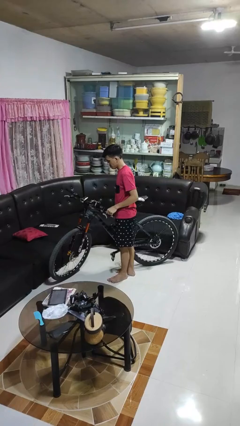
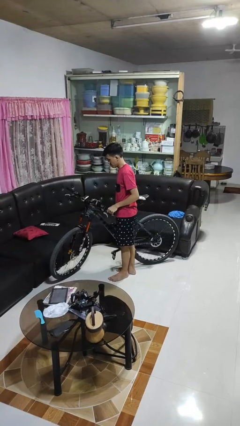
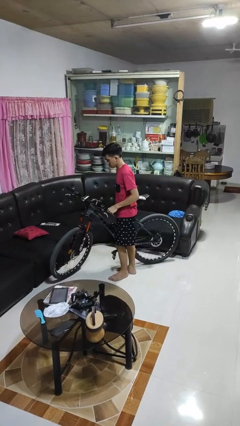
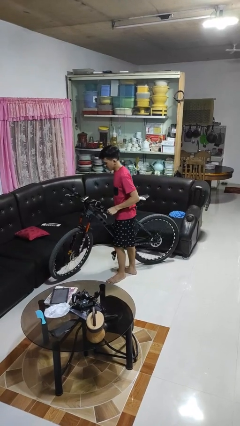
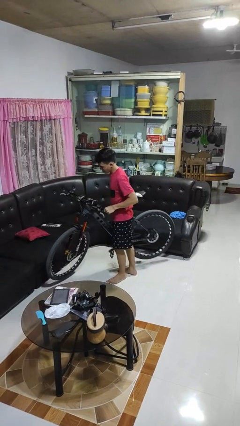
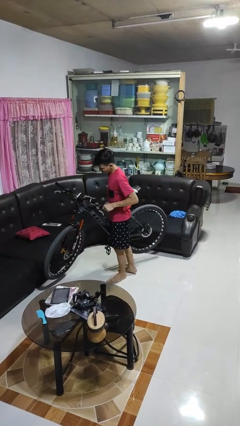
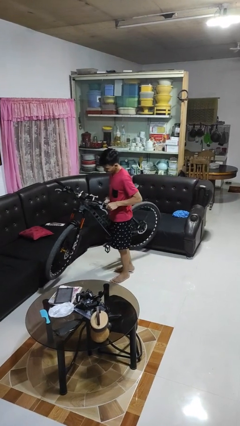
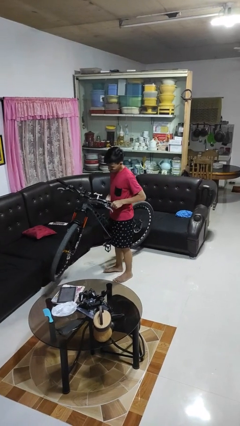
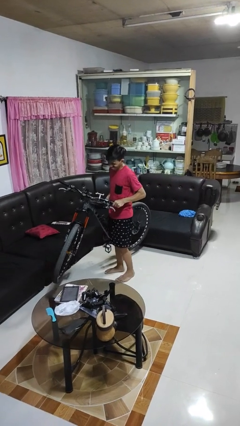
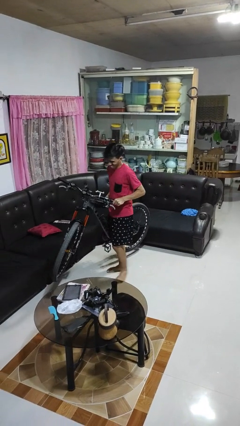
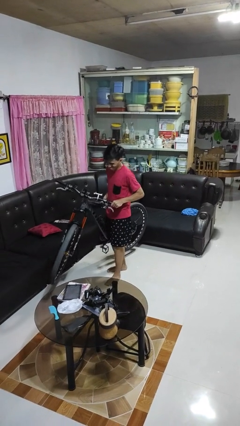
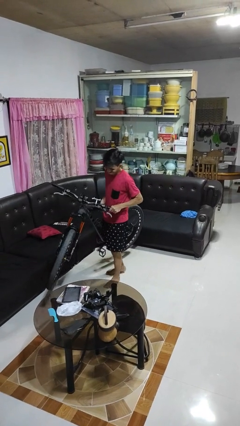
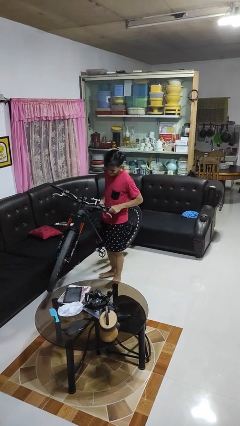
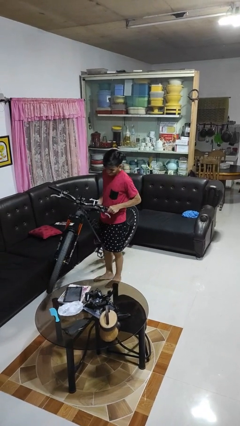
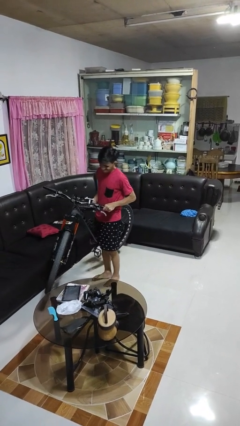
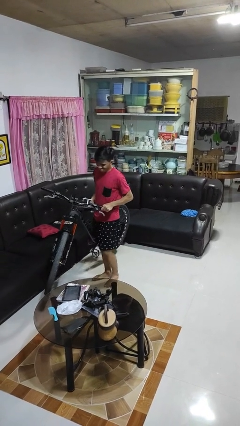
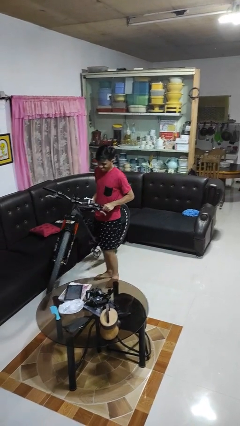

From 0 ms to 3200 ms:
person carries bicycle

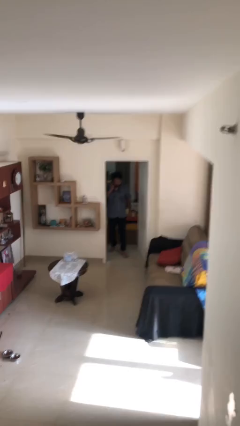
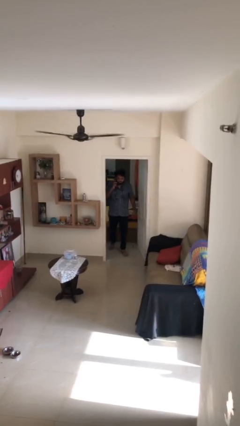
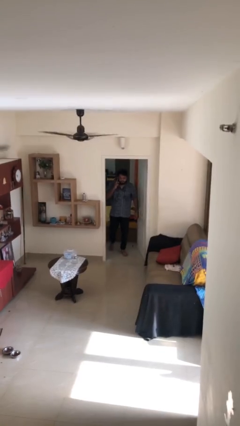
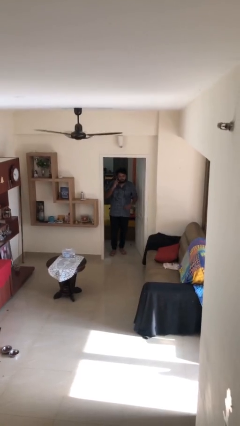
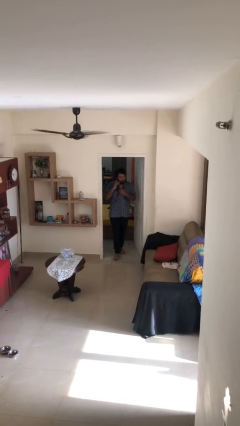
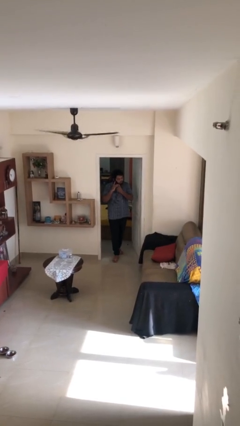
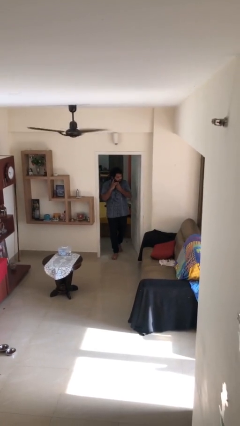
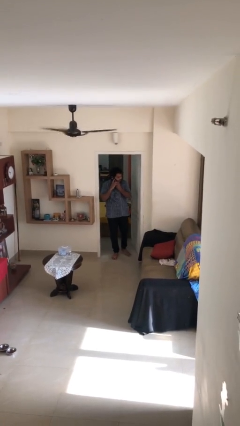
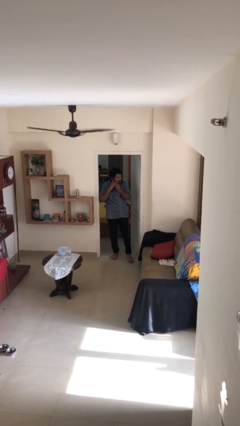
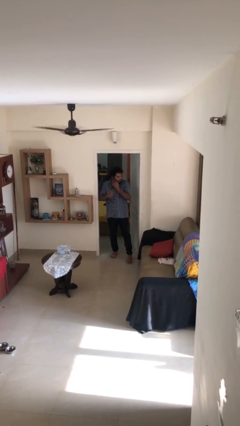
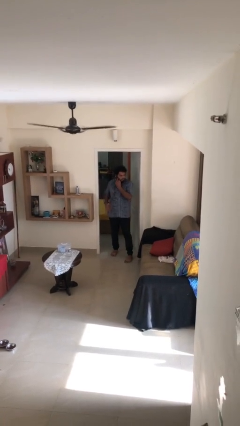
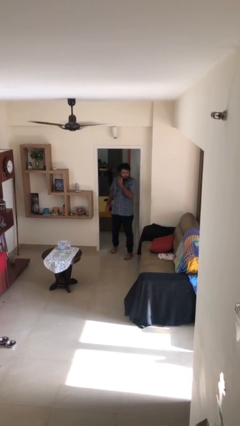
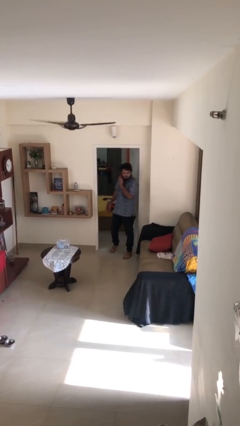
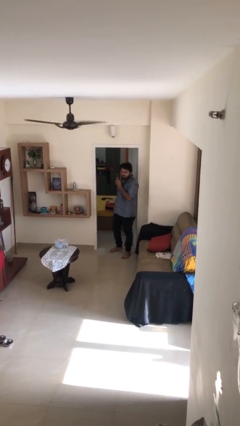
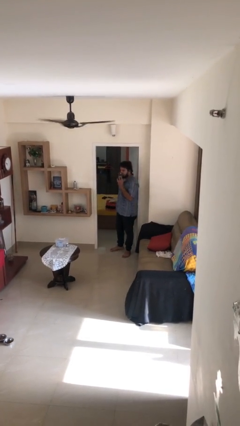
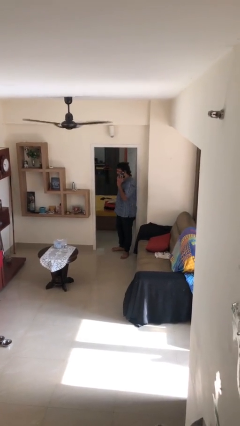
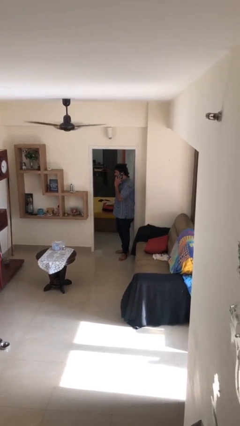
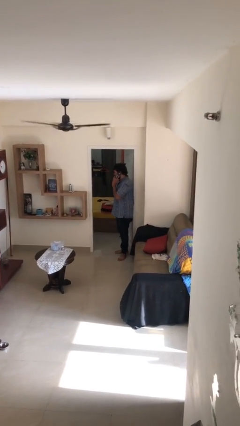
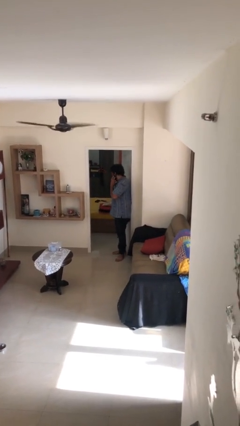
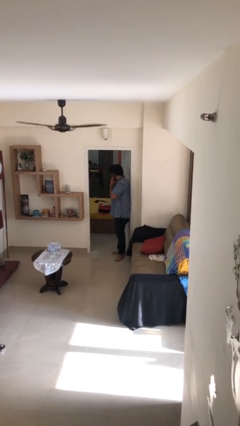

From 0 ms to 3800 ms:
person enters scene through structure

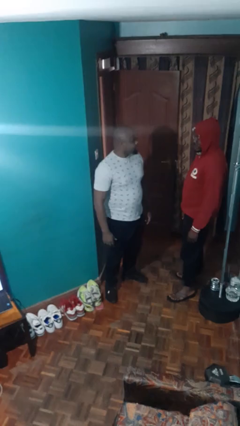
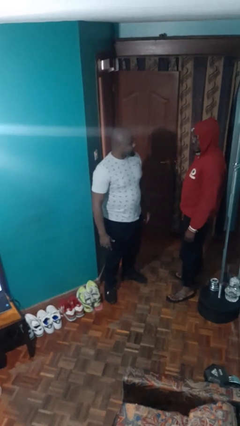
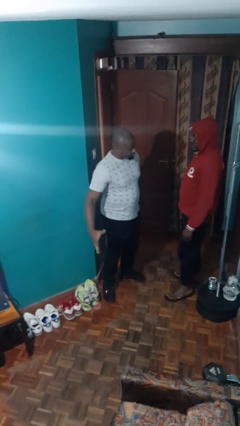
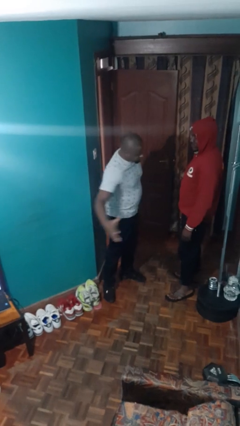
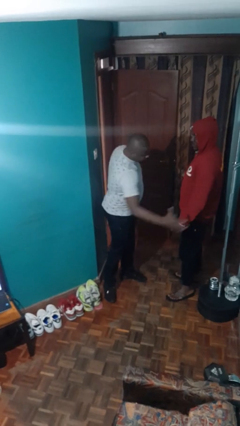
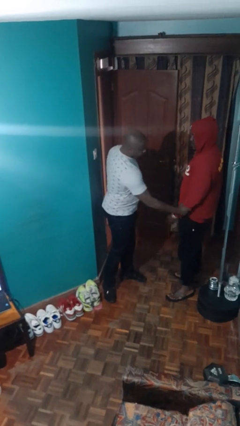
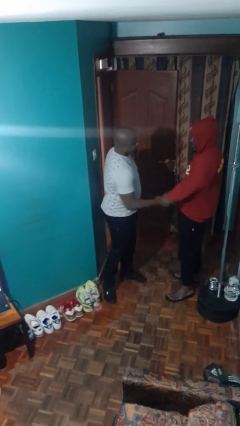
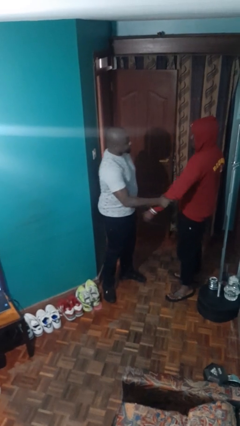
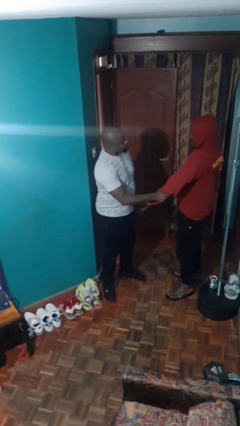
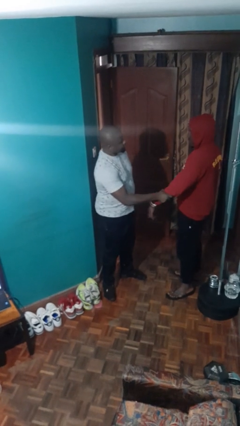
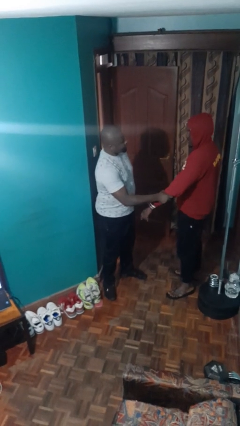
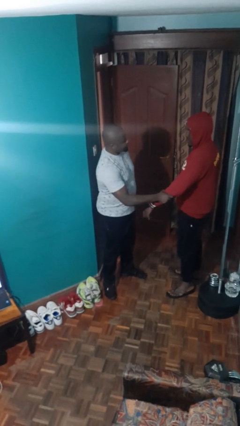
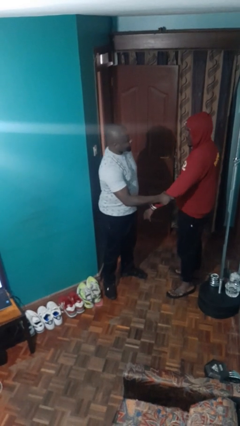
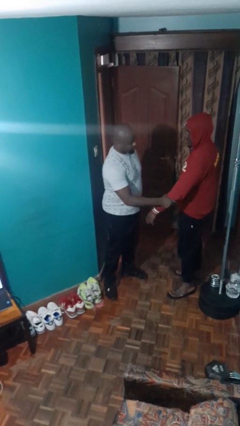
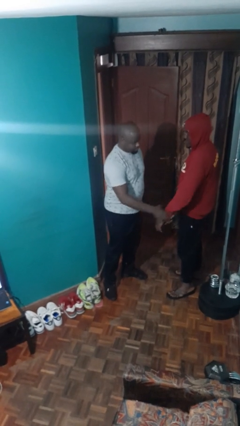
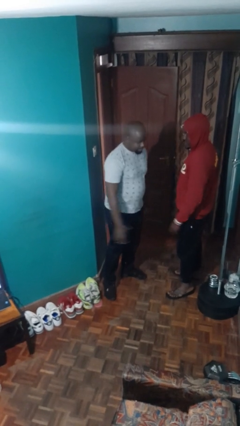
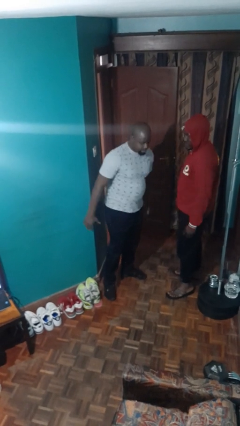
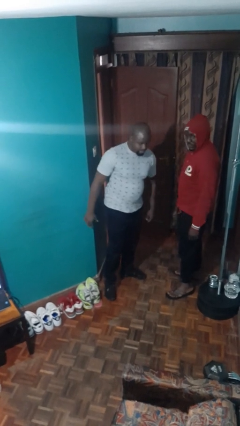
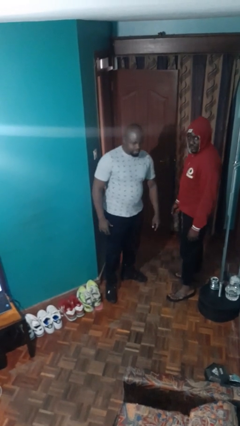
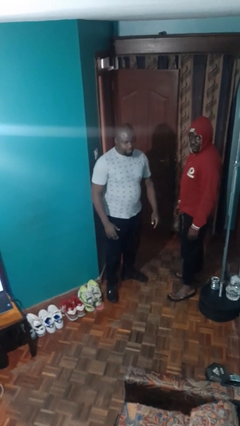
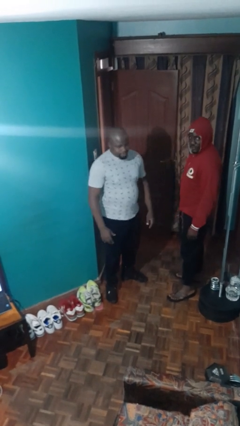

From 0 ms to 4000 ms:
person grabs person by forearm

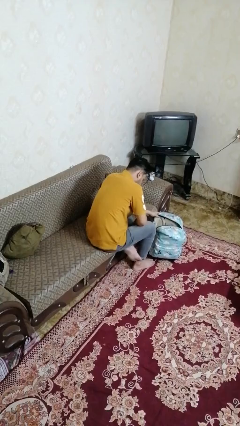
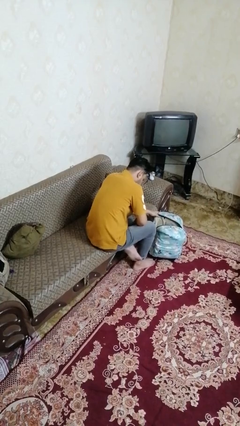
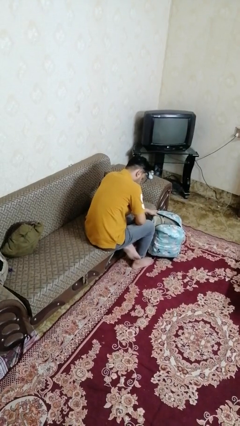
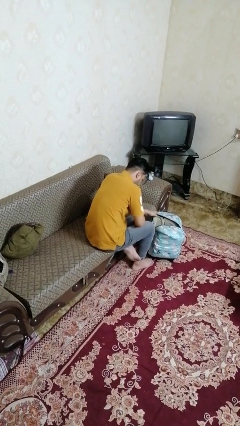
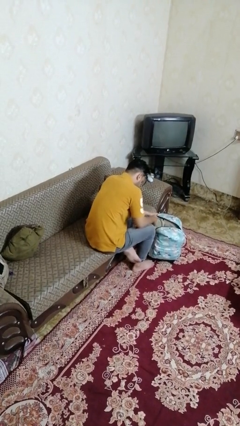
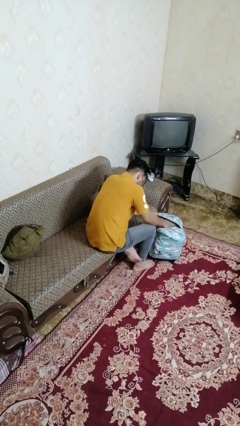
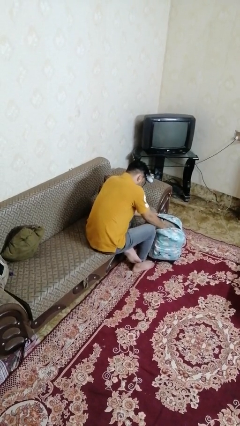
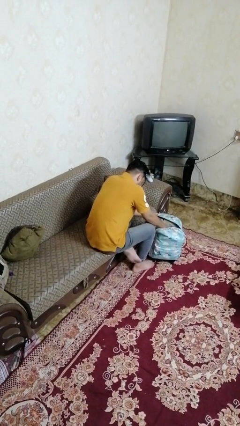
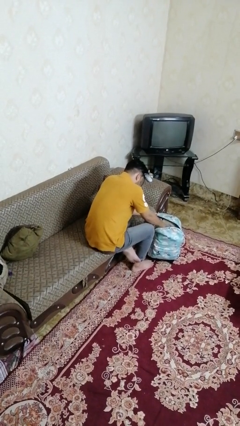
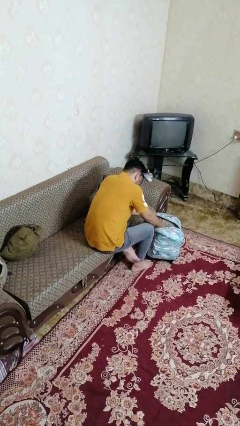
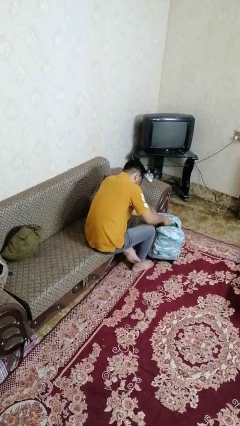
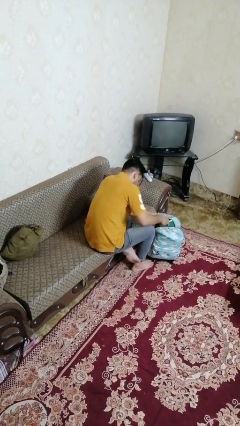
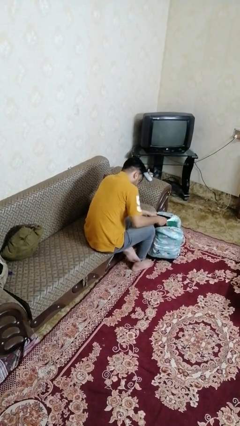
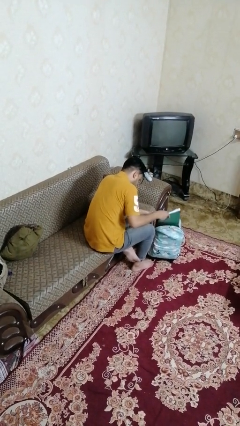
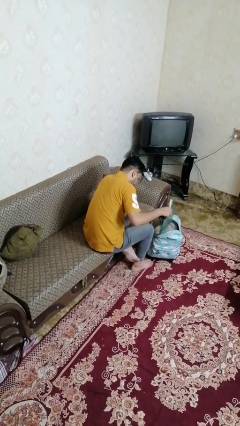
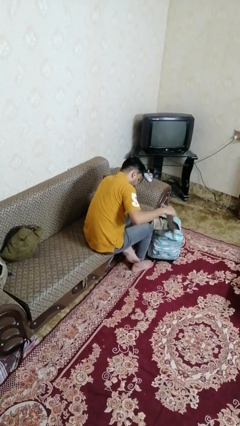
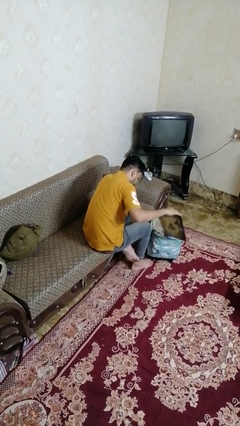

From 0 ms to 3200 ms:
person takes object from bag

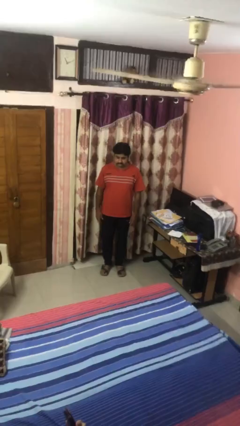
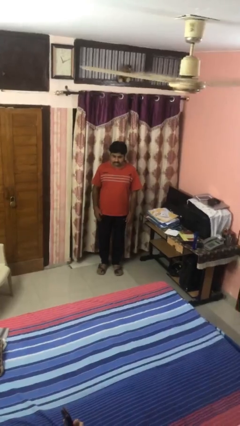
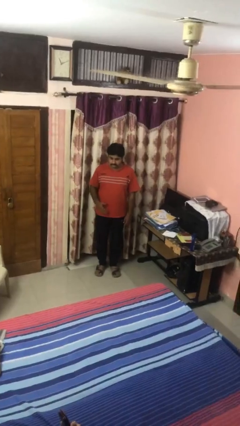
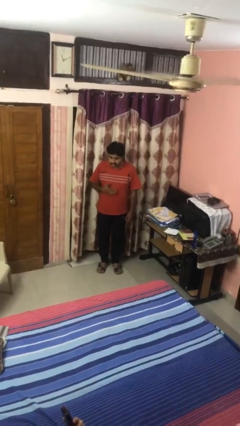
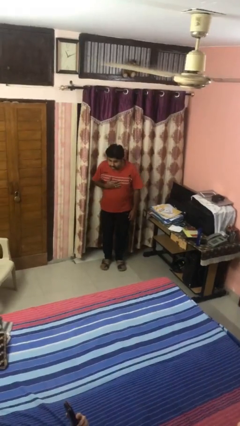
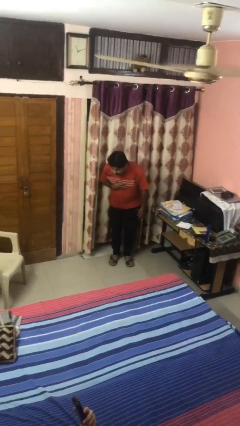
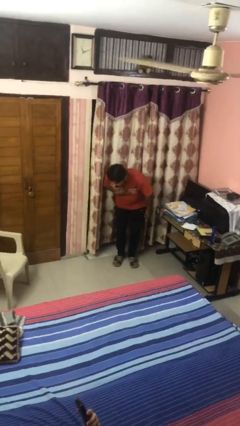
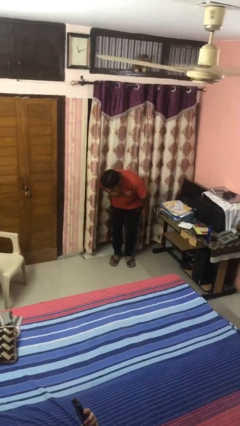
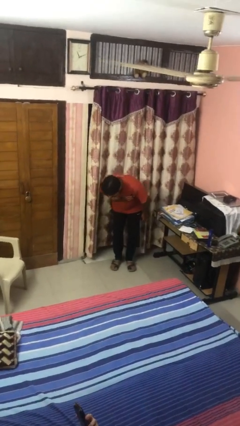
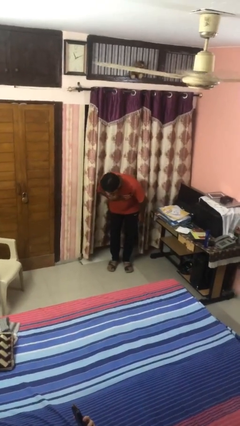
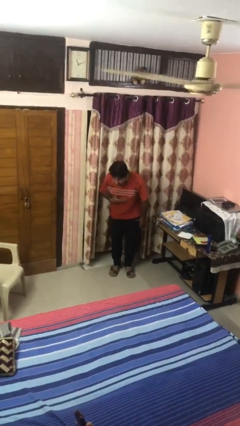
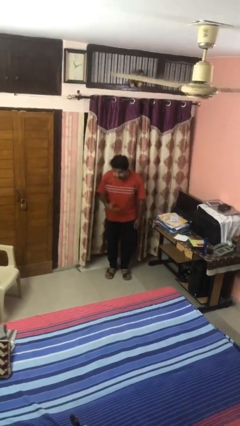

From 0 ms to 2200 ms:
person bows

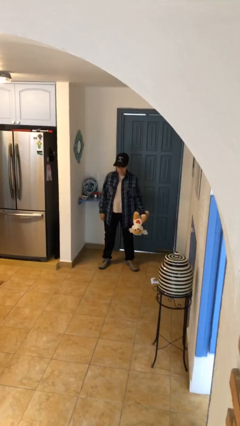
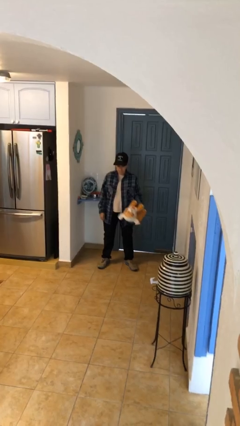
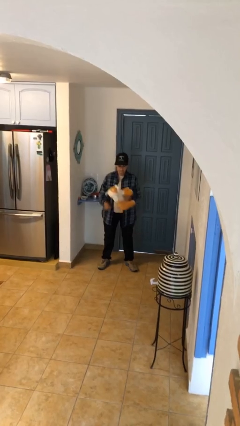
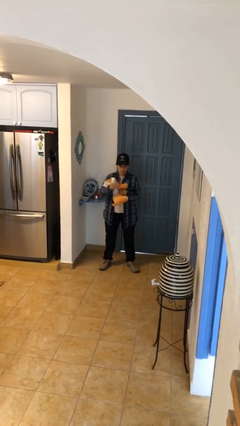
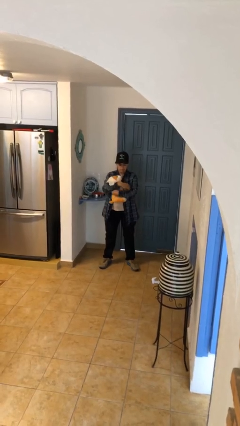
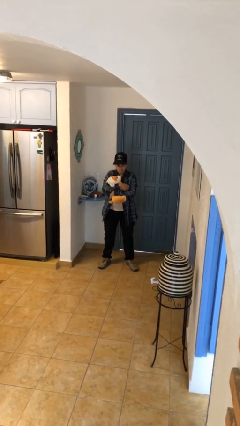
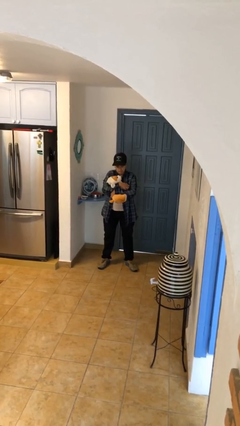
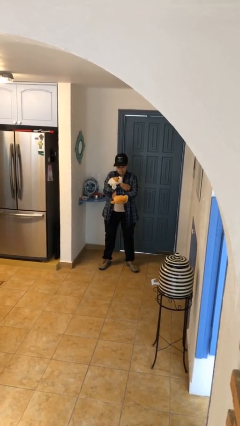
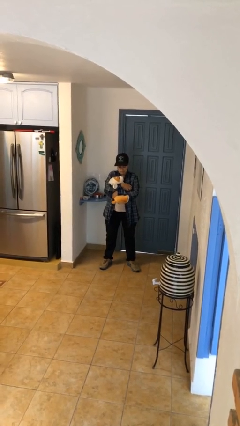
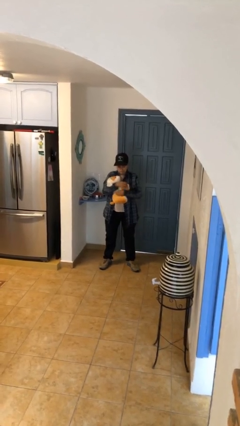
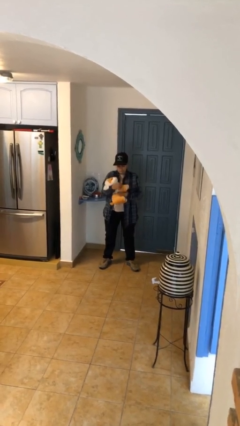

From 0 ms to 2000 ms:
person hugs stuffed animal
